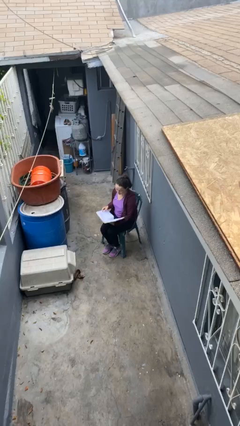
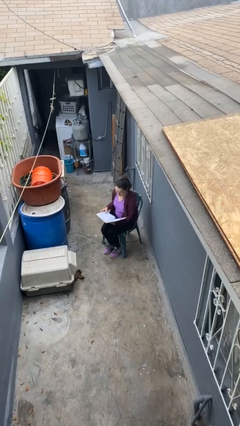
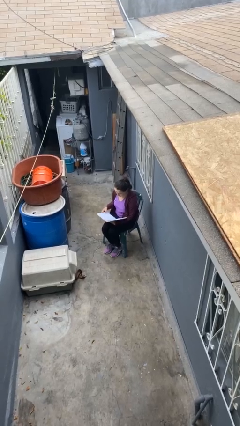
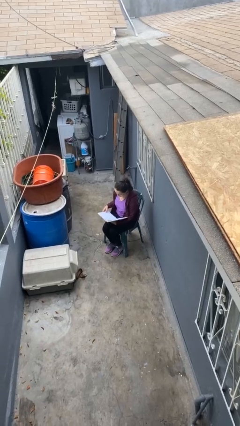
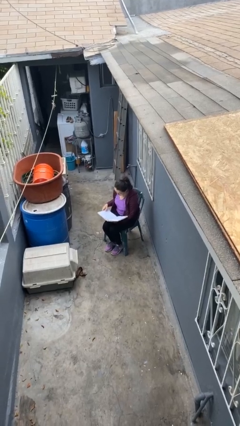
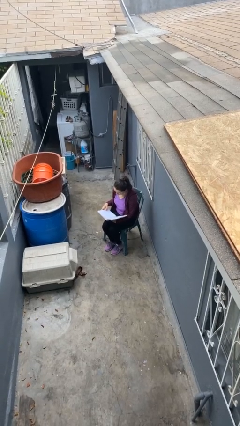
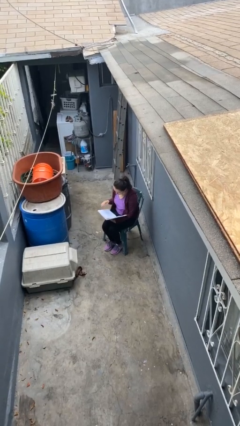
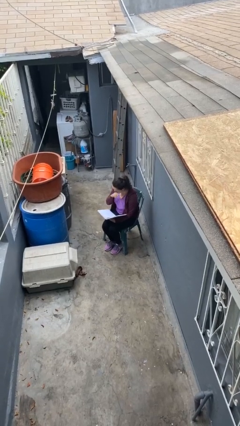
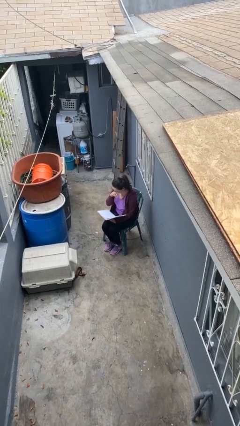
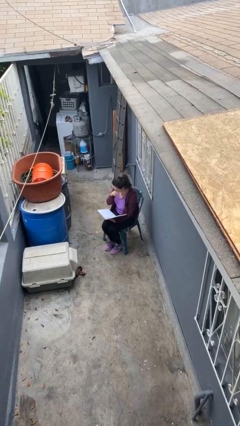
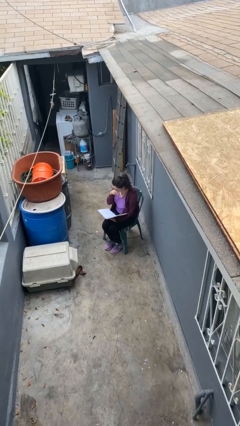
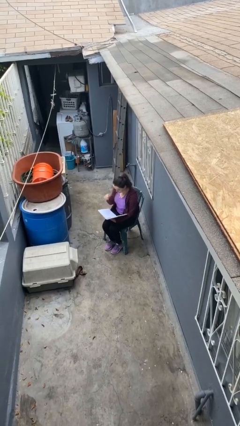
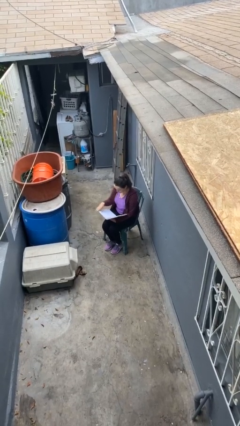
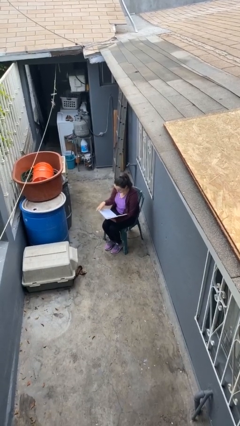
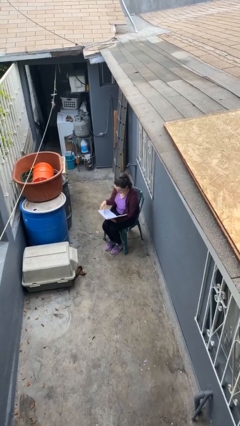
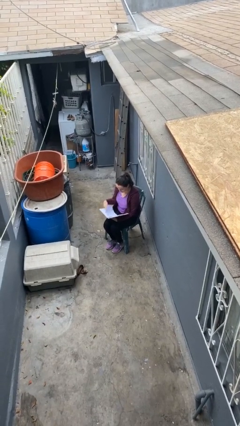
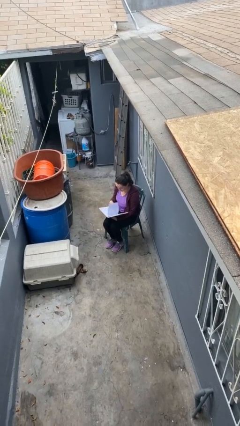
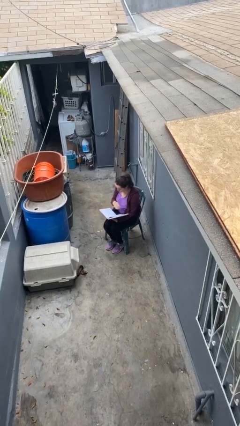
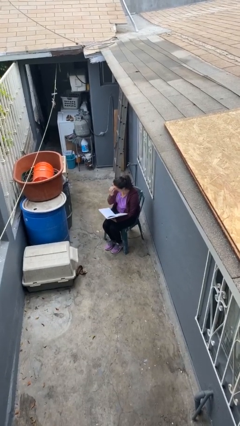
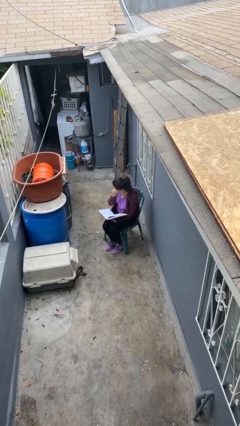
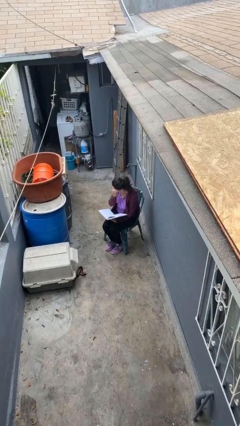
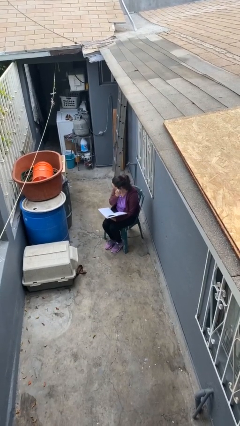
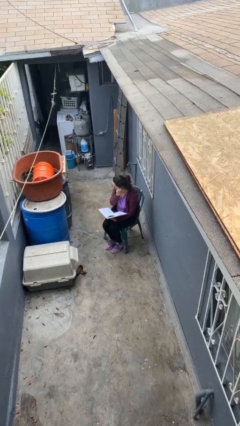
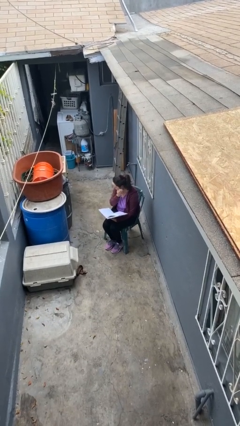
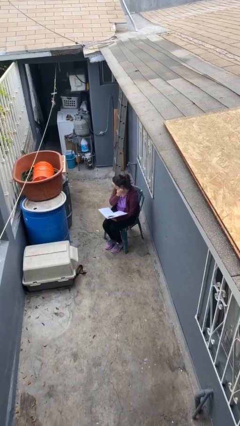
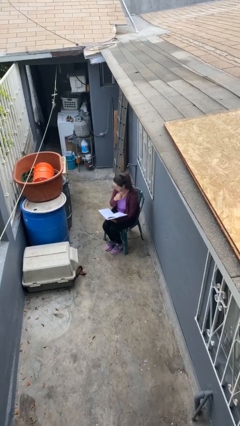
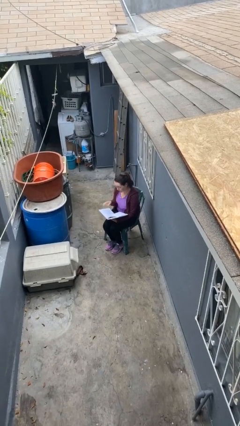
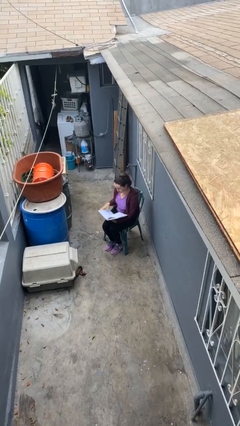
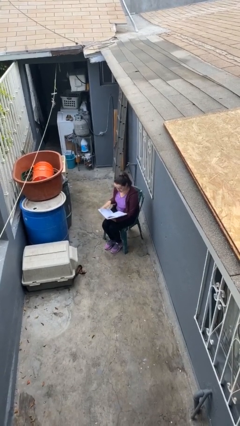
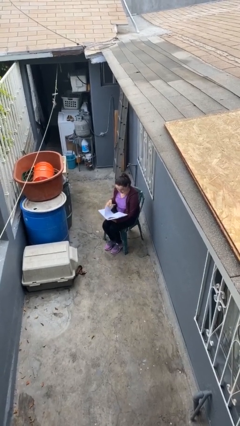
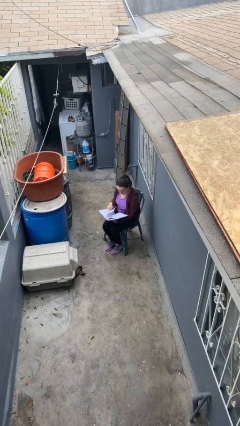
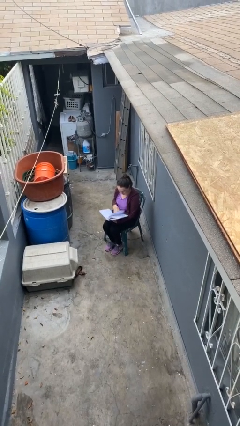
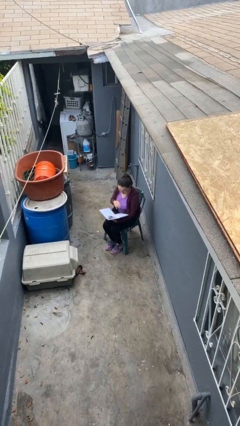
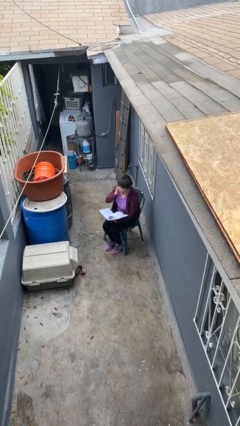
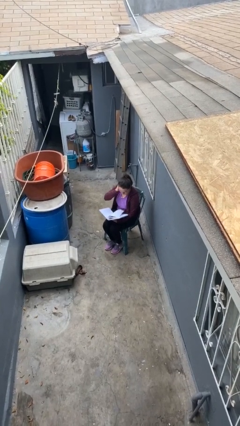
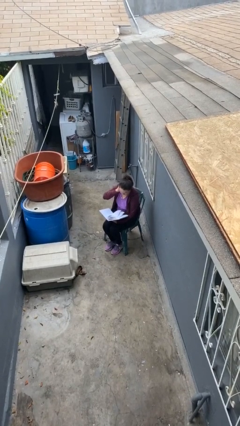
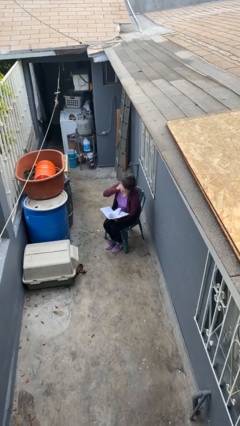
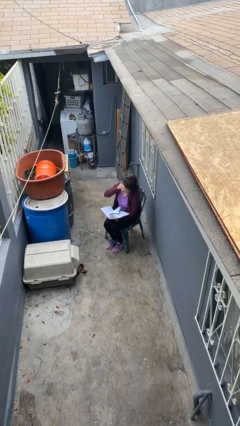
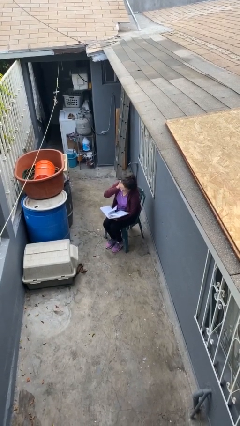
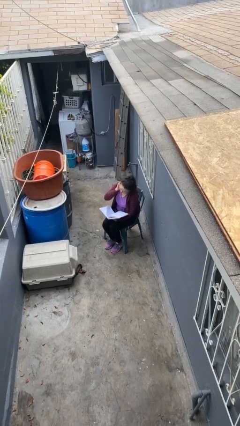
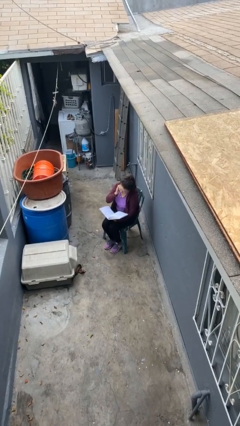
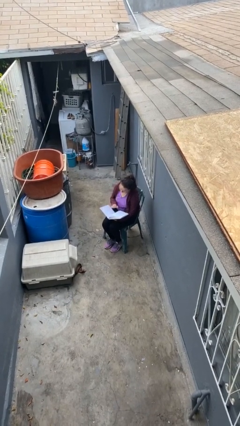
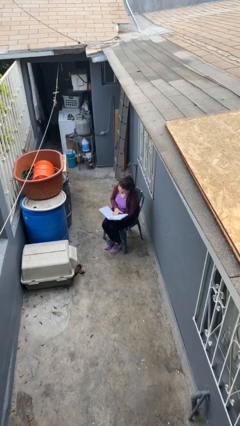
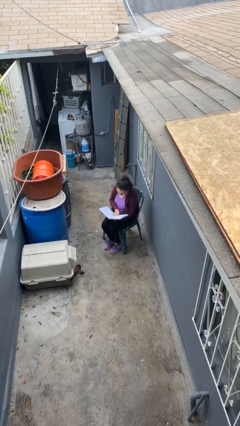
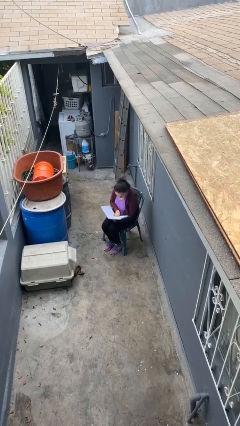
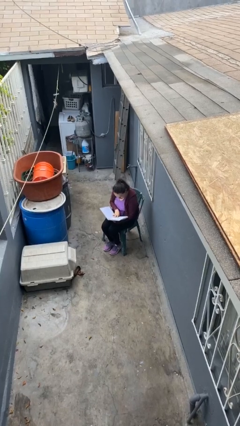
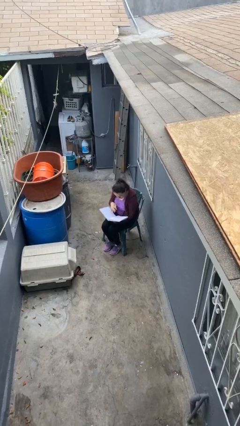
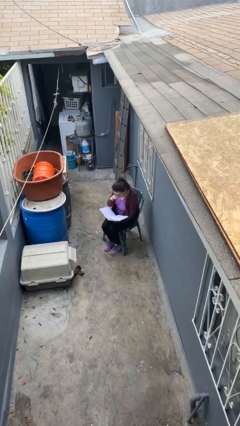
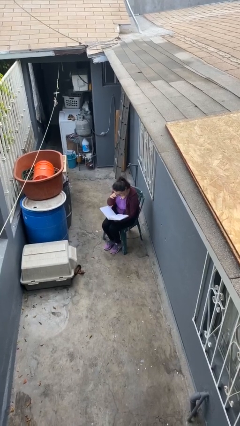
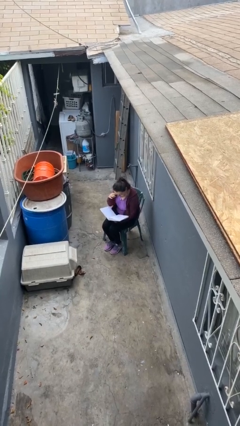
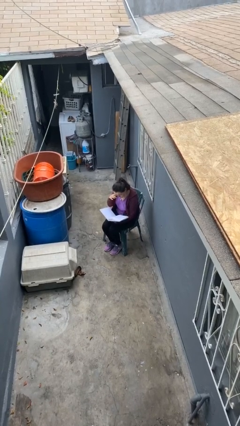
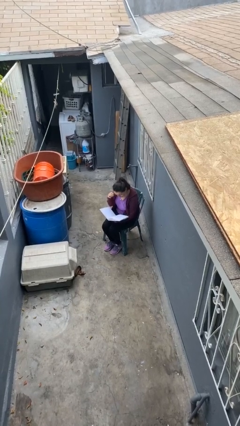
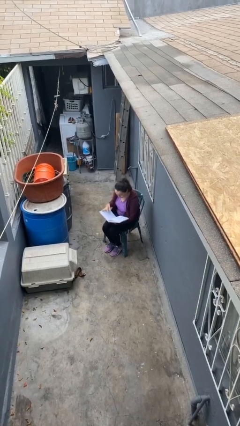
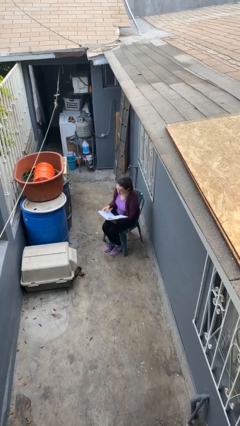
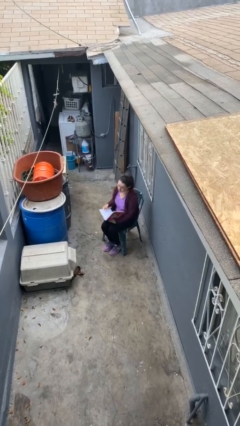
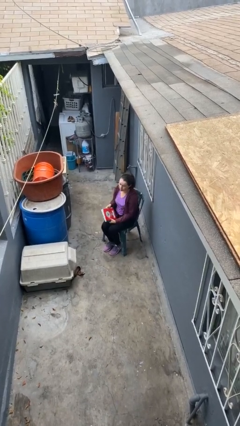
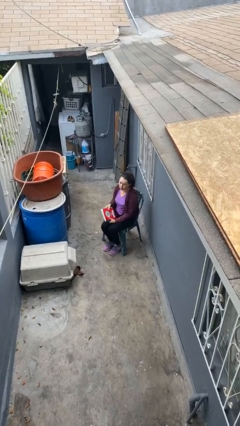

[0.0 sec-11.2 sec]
person reads document

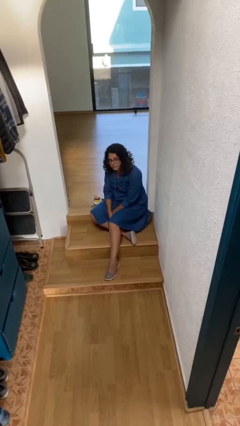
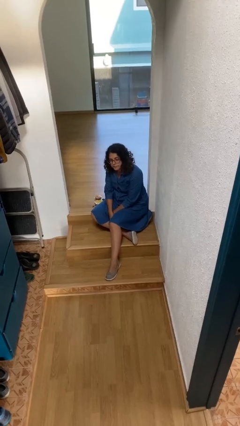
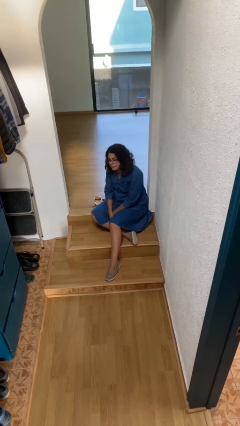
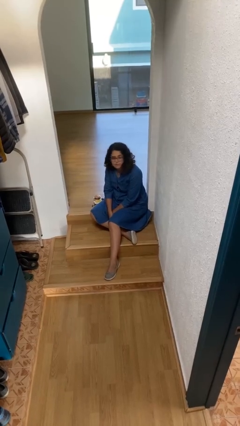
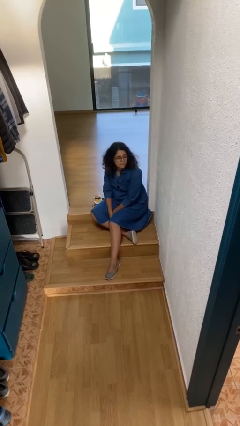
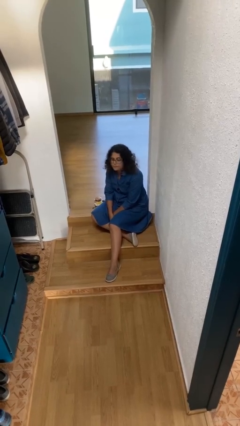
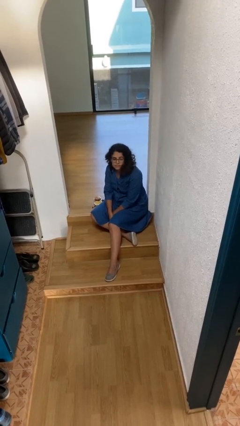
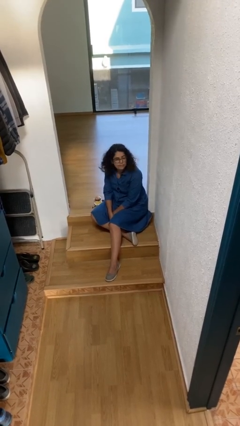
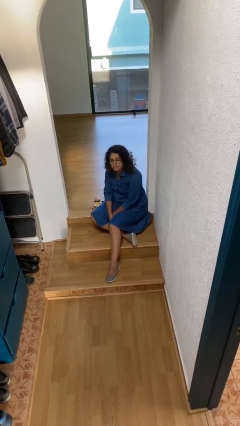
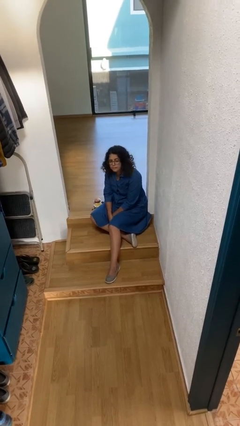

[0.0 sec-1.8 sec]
person shakes head

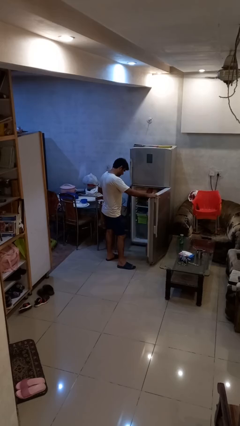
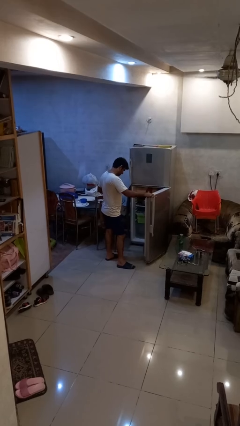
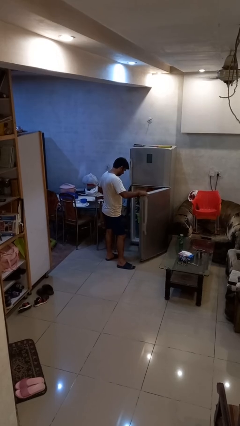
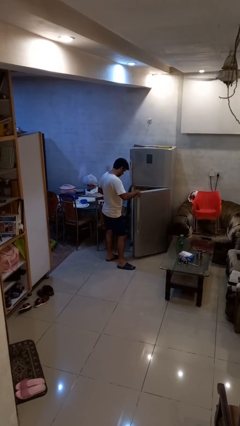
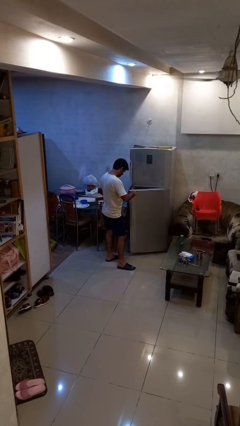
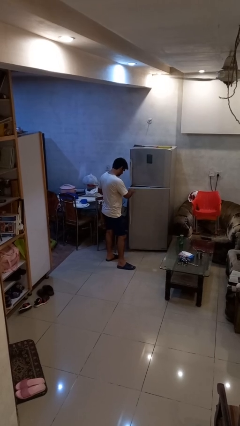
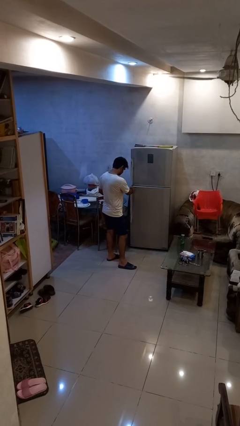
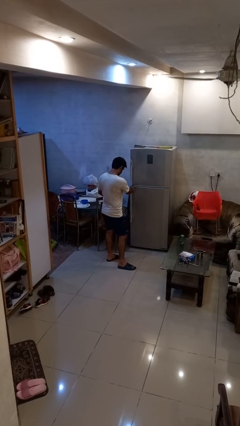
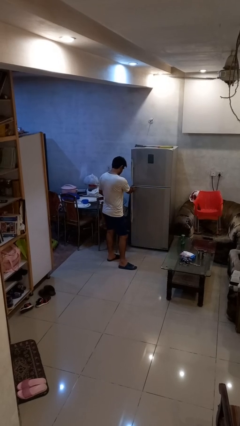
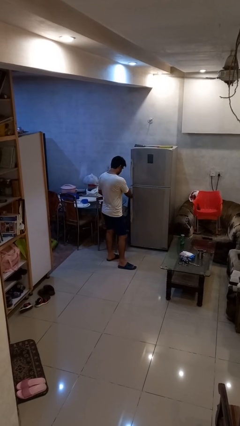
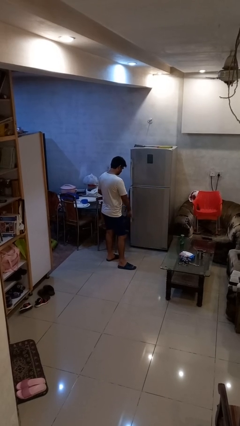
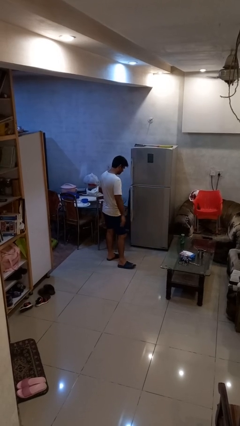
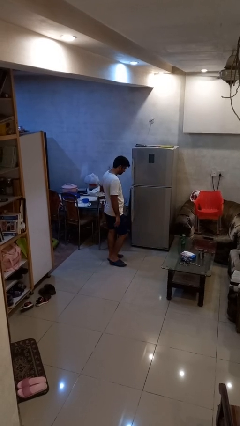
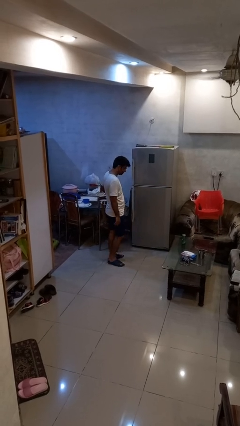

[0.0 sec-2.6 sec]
person closes refrigerator

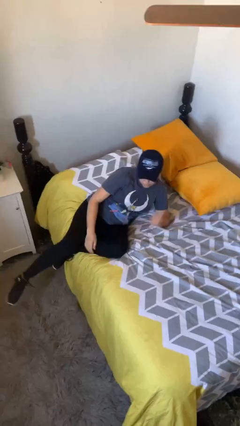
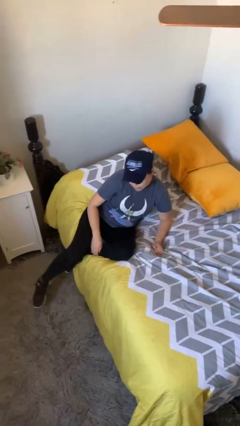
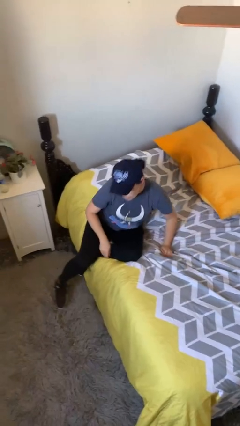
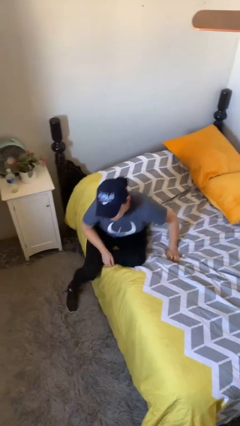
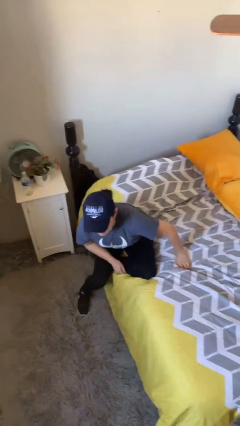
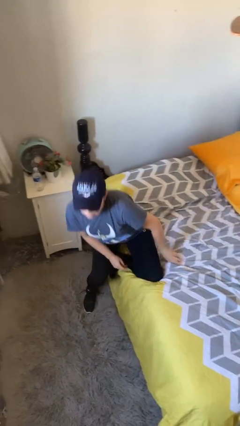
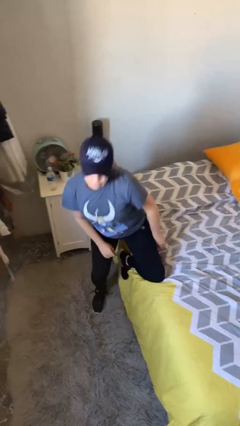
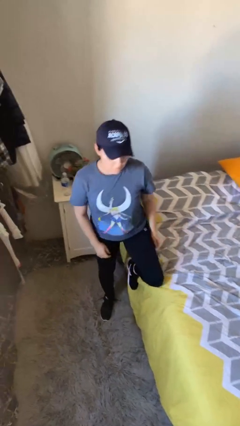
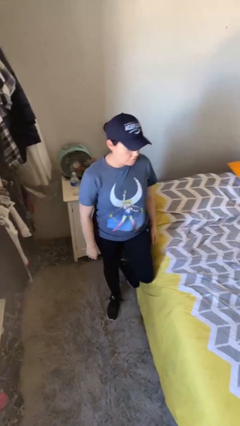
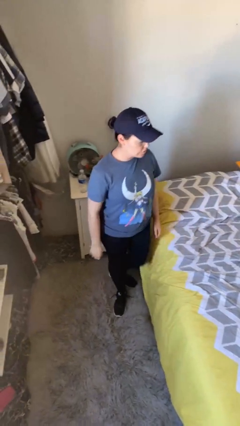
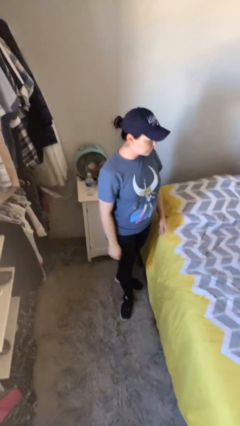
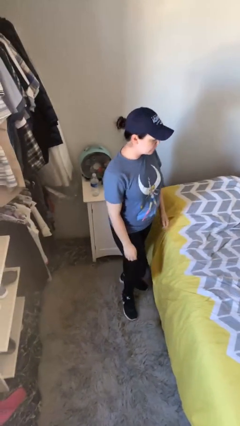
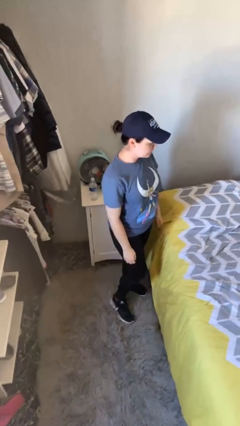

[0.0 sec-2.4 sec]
person stands up
